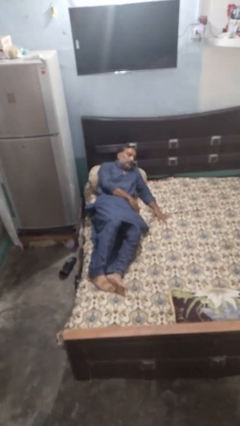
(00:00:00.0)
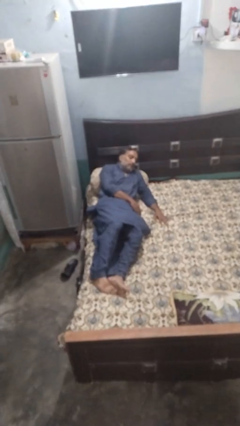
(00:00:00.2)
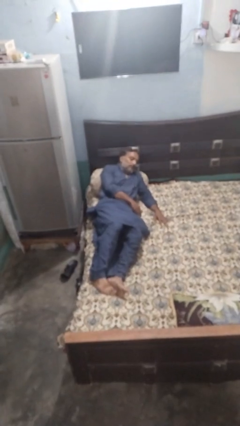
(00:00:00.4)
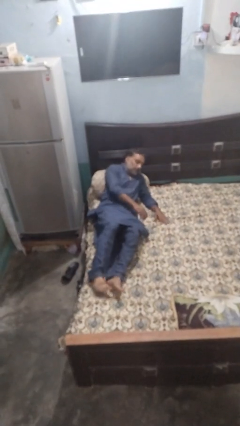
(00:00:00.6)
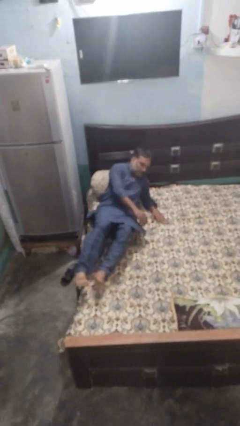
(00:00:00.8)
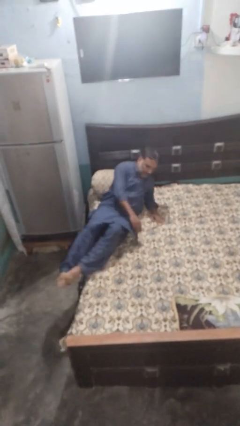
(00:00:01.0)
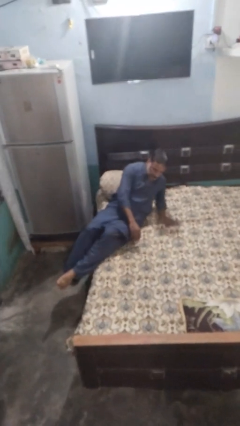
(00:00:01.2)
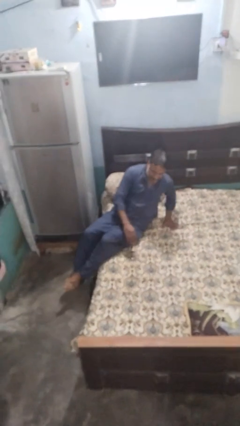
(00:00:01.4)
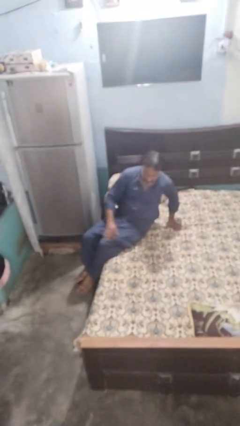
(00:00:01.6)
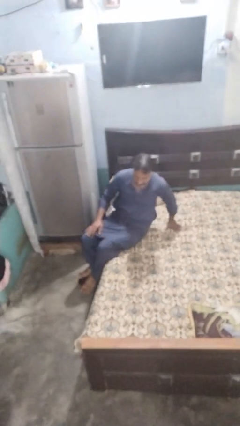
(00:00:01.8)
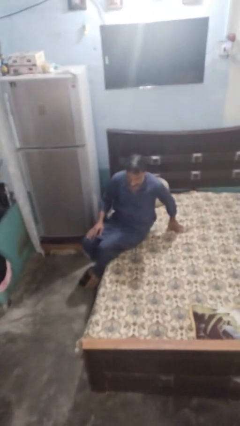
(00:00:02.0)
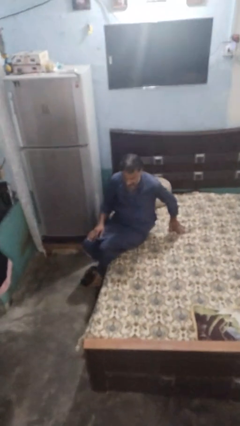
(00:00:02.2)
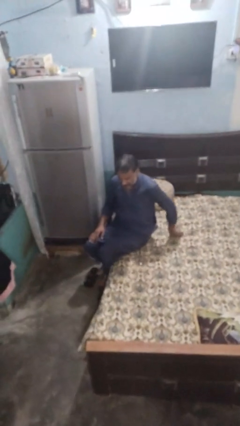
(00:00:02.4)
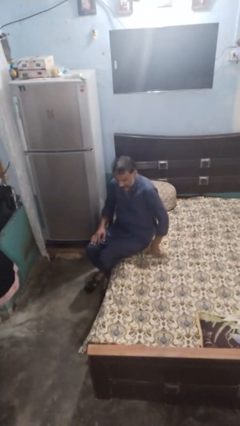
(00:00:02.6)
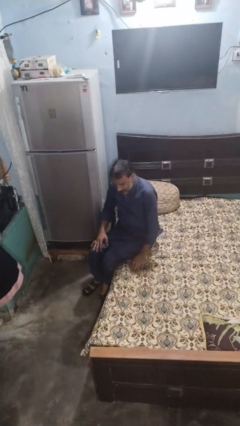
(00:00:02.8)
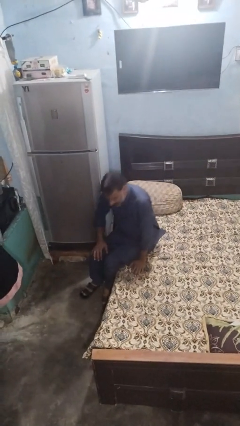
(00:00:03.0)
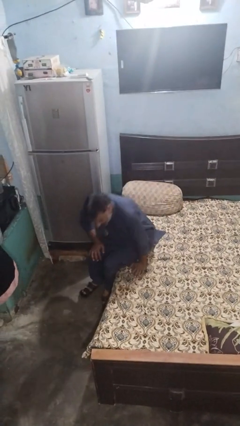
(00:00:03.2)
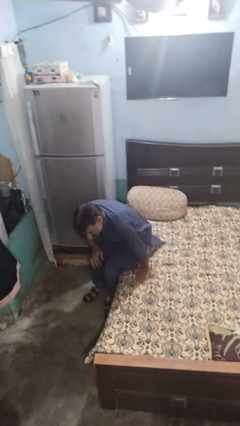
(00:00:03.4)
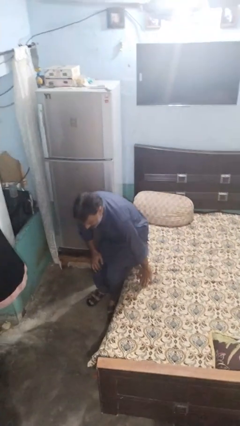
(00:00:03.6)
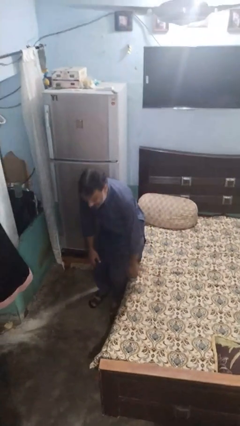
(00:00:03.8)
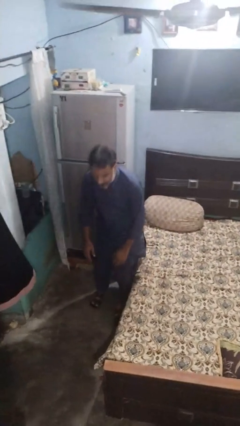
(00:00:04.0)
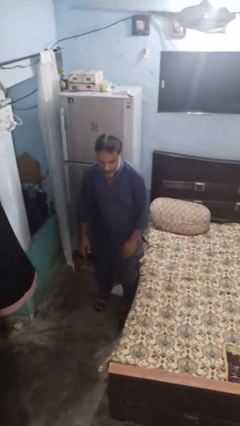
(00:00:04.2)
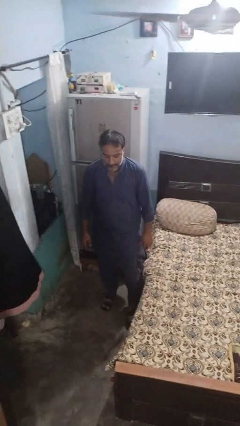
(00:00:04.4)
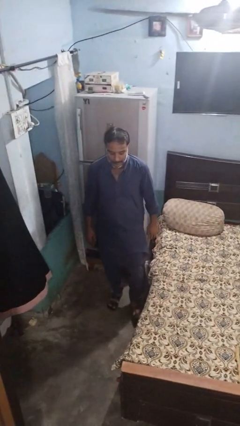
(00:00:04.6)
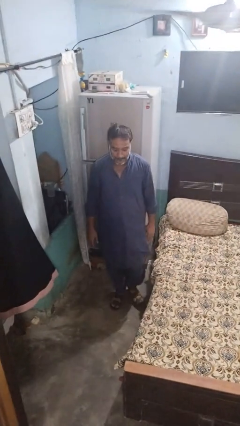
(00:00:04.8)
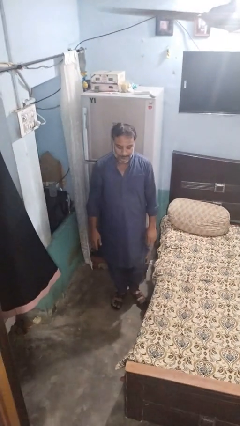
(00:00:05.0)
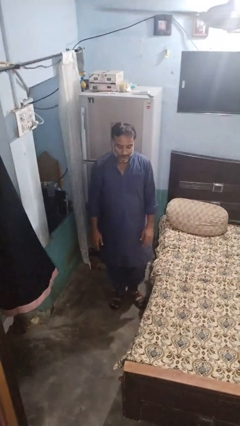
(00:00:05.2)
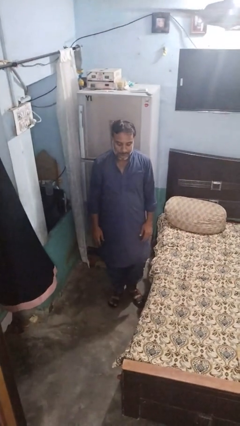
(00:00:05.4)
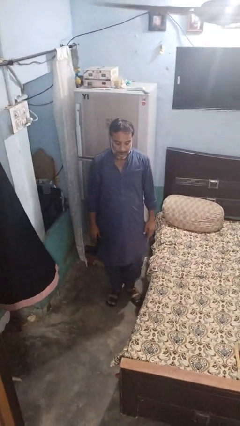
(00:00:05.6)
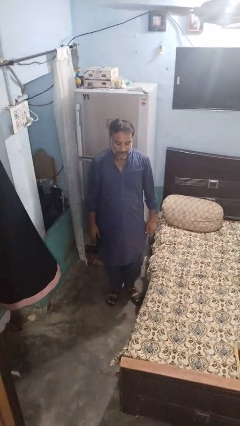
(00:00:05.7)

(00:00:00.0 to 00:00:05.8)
person stands up

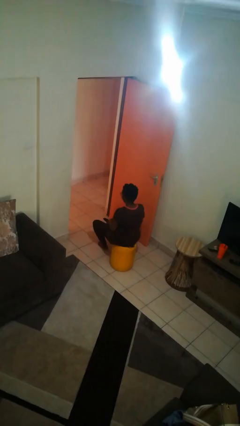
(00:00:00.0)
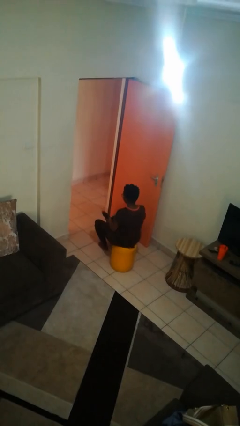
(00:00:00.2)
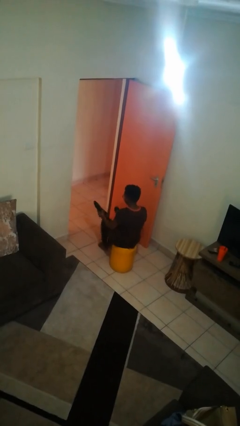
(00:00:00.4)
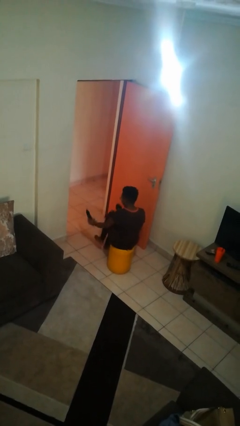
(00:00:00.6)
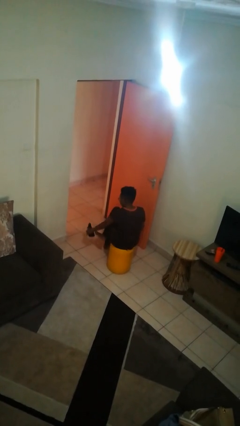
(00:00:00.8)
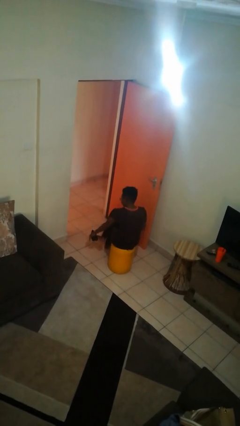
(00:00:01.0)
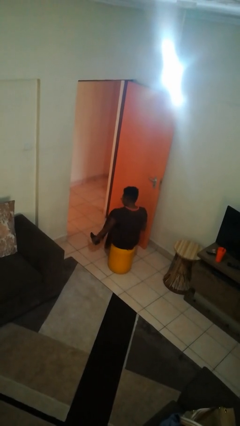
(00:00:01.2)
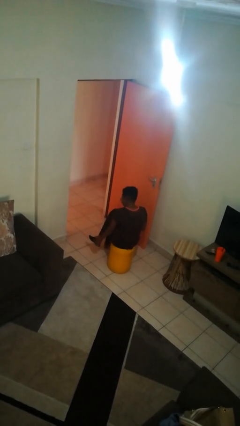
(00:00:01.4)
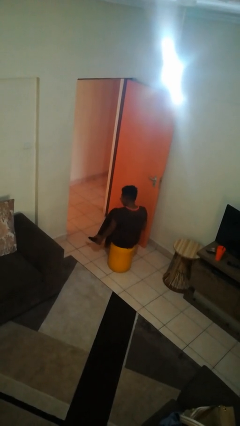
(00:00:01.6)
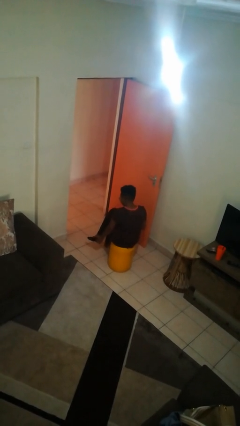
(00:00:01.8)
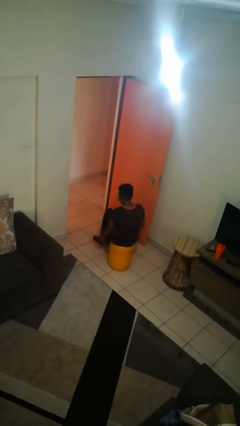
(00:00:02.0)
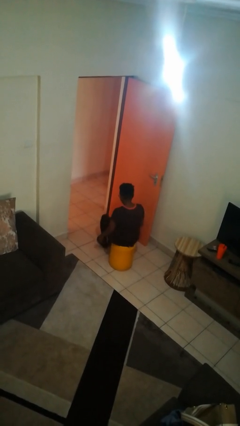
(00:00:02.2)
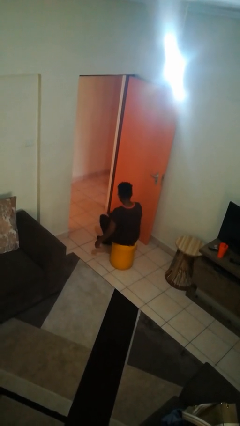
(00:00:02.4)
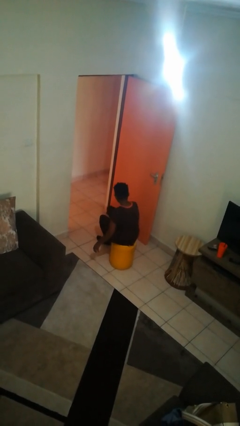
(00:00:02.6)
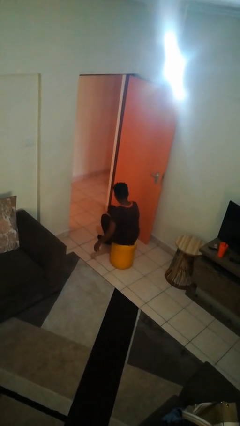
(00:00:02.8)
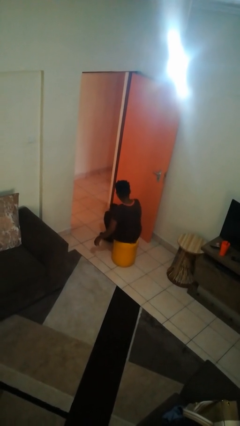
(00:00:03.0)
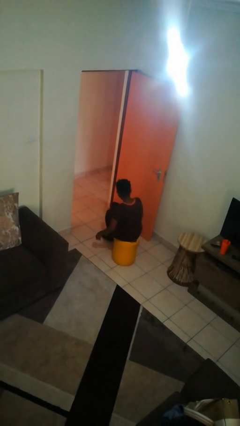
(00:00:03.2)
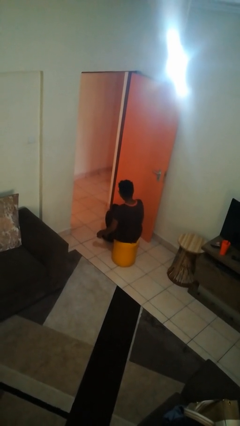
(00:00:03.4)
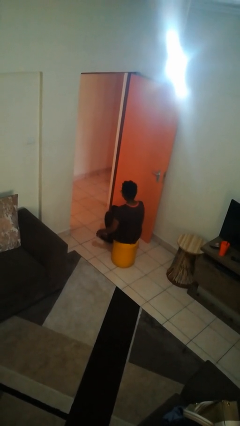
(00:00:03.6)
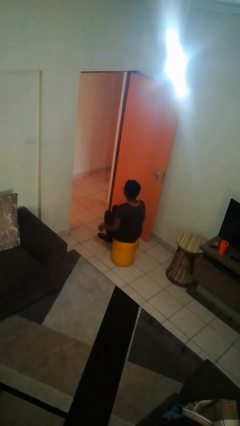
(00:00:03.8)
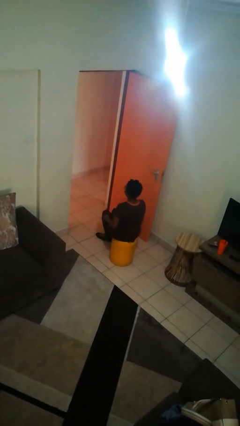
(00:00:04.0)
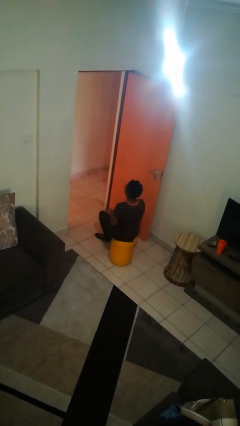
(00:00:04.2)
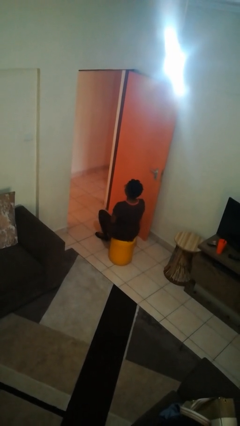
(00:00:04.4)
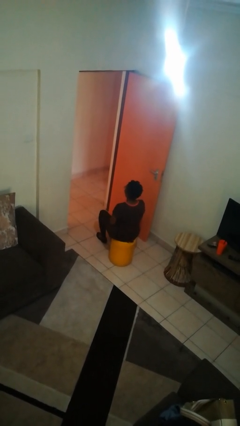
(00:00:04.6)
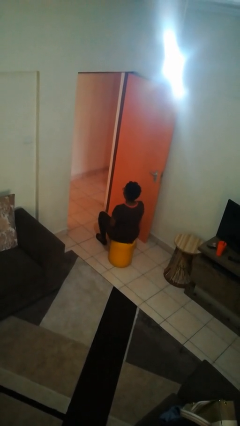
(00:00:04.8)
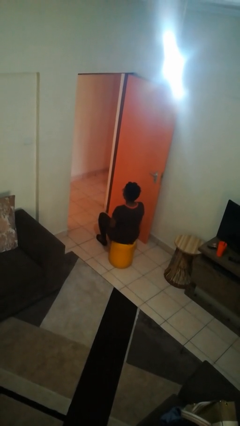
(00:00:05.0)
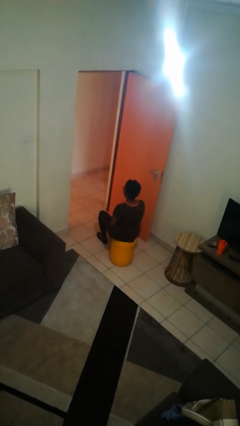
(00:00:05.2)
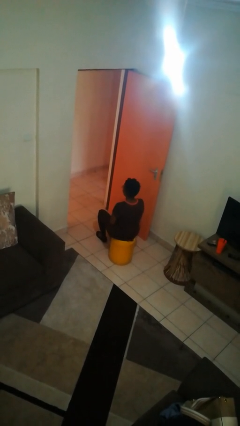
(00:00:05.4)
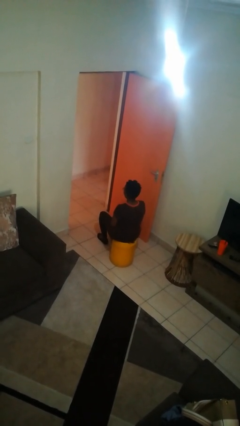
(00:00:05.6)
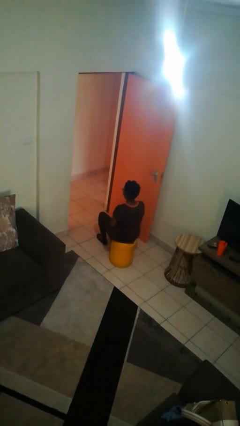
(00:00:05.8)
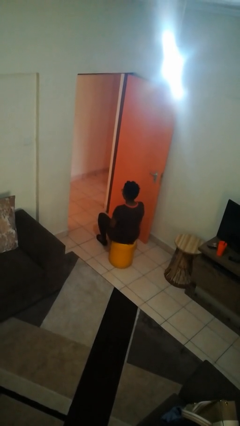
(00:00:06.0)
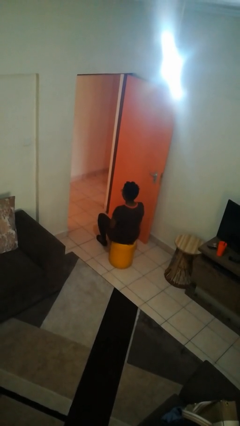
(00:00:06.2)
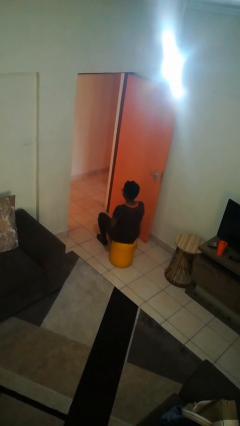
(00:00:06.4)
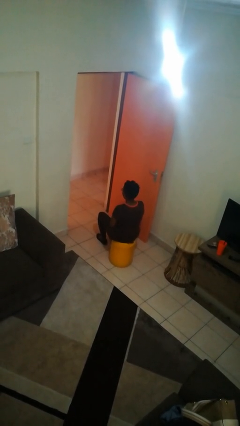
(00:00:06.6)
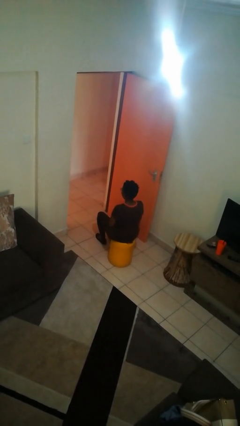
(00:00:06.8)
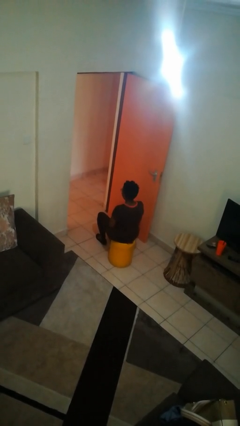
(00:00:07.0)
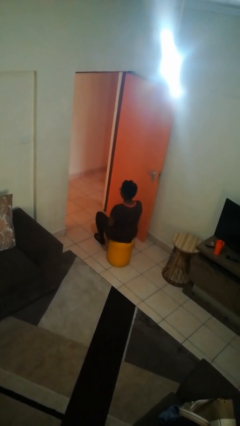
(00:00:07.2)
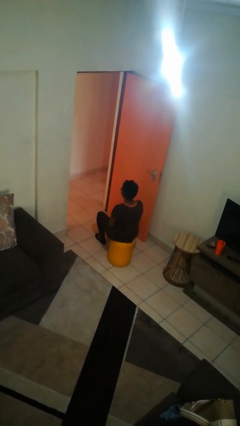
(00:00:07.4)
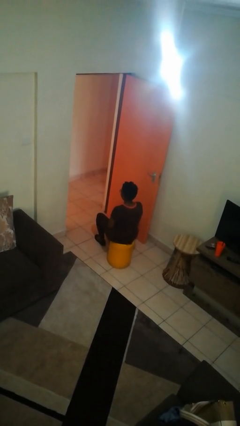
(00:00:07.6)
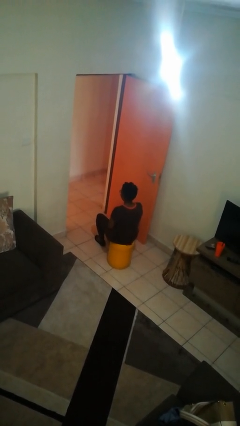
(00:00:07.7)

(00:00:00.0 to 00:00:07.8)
person puts on shoes

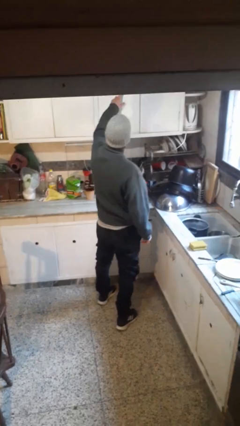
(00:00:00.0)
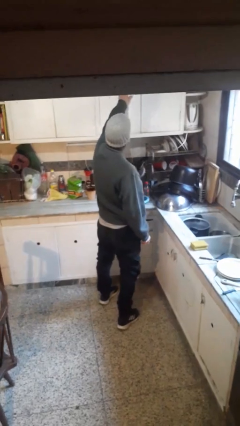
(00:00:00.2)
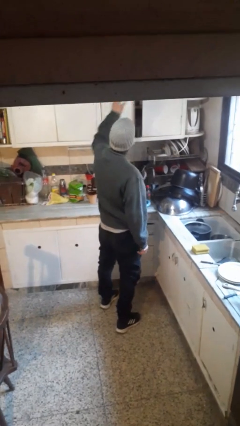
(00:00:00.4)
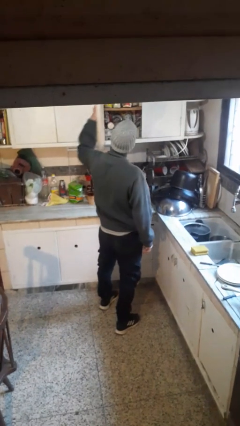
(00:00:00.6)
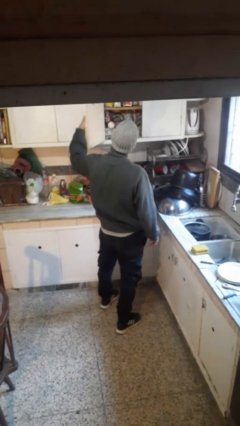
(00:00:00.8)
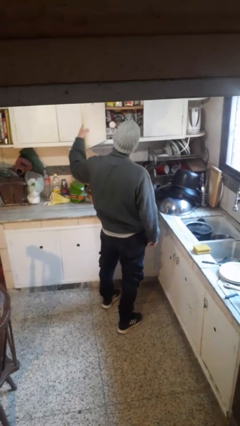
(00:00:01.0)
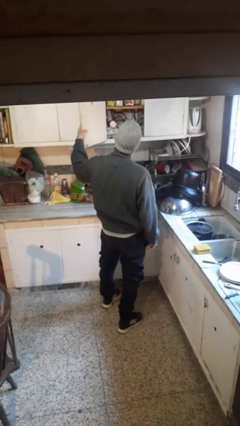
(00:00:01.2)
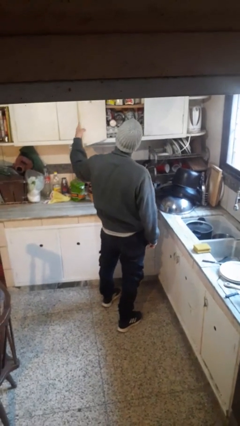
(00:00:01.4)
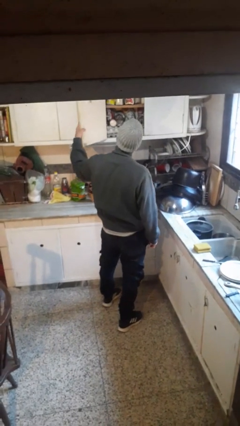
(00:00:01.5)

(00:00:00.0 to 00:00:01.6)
person opens cabinet

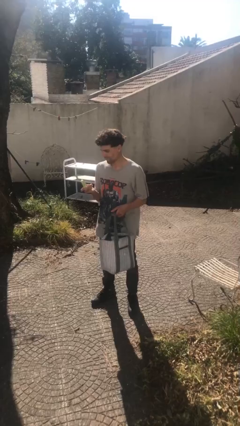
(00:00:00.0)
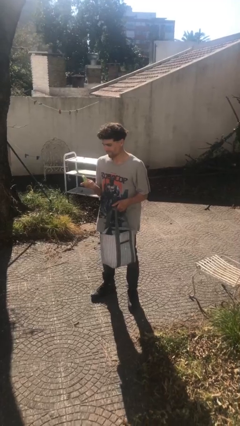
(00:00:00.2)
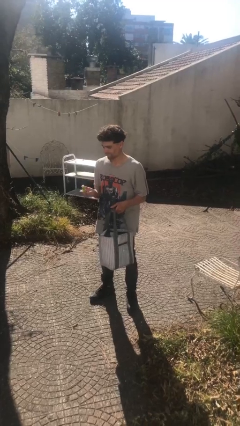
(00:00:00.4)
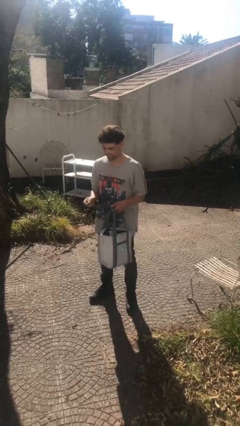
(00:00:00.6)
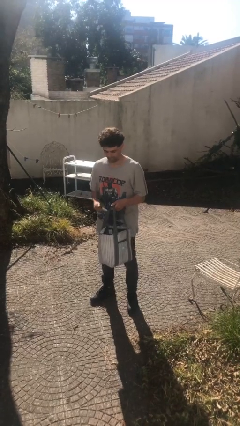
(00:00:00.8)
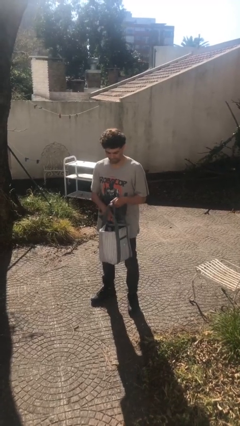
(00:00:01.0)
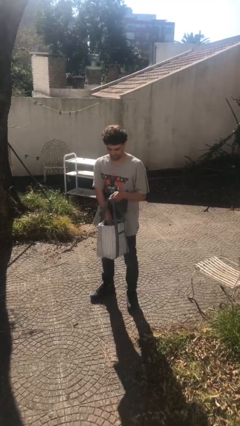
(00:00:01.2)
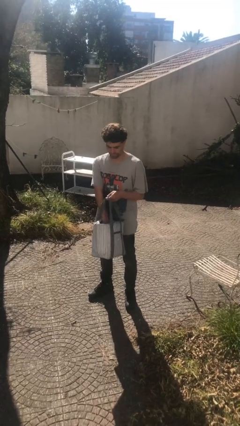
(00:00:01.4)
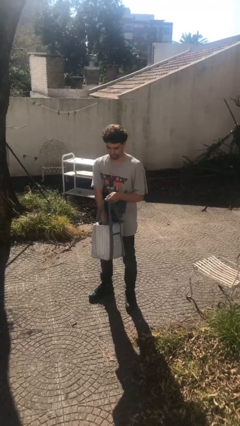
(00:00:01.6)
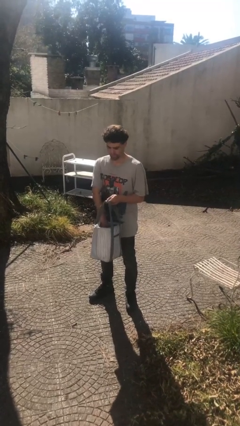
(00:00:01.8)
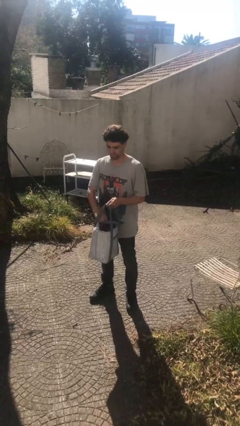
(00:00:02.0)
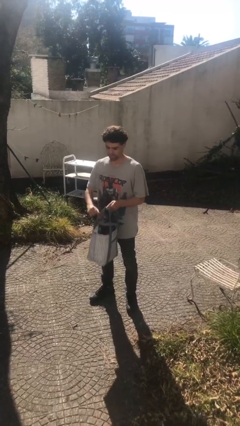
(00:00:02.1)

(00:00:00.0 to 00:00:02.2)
person puts object into purse

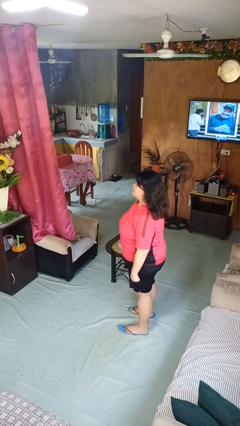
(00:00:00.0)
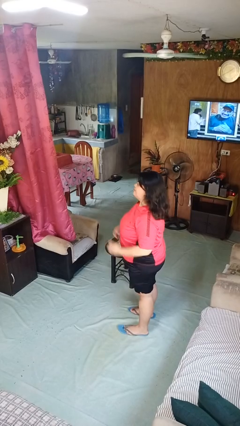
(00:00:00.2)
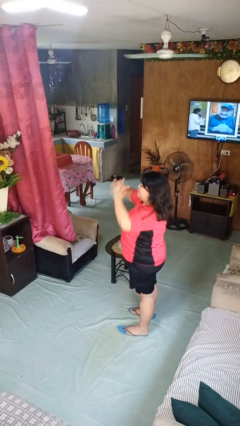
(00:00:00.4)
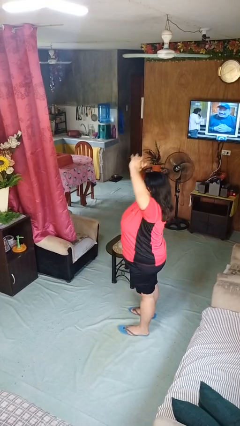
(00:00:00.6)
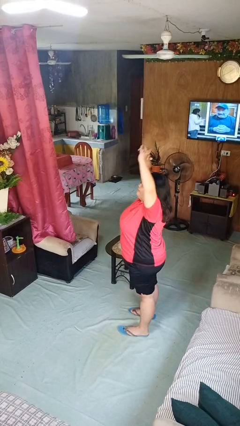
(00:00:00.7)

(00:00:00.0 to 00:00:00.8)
person stretches arms over head
